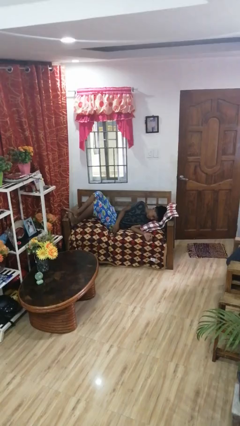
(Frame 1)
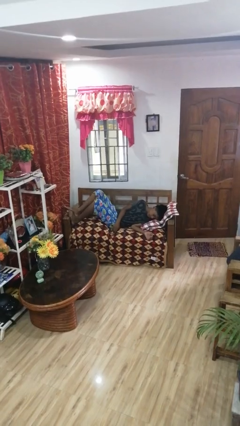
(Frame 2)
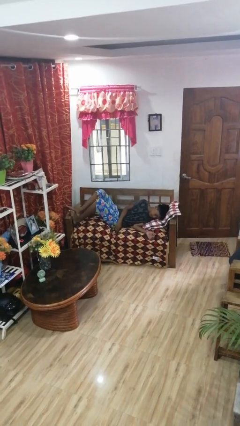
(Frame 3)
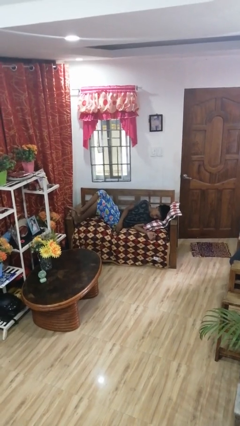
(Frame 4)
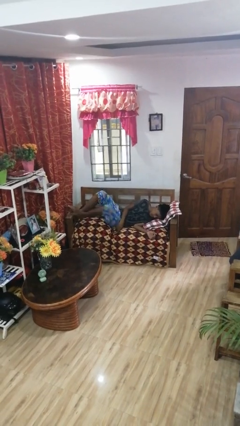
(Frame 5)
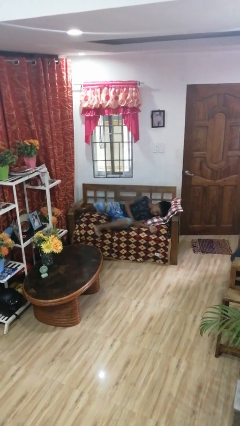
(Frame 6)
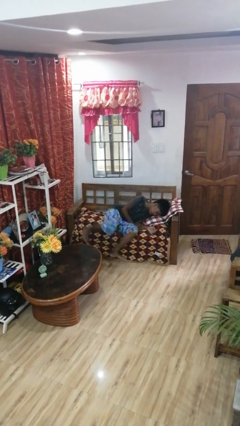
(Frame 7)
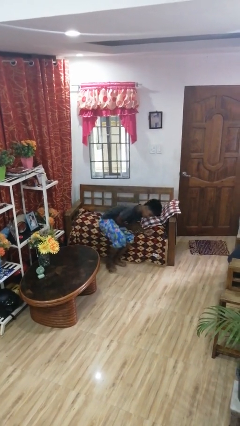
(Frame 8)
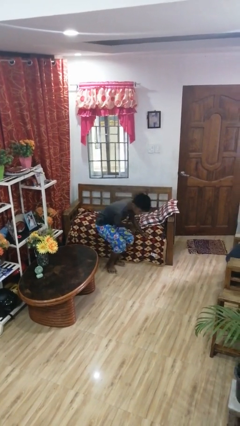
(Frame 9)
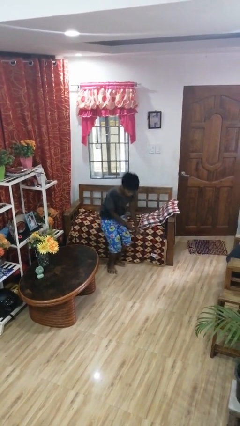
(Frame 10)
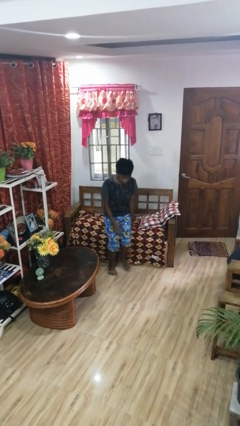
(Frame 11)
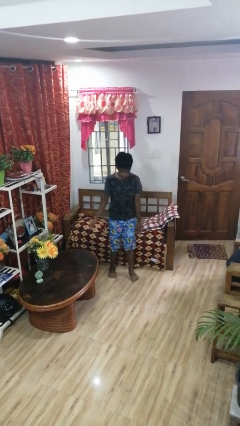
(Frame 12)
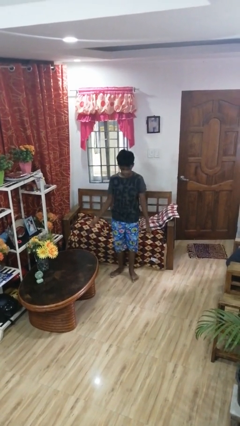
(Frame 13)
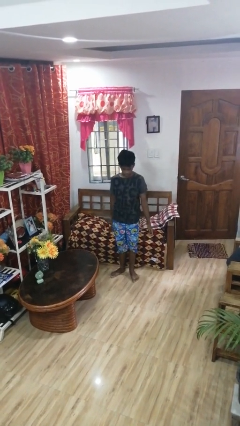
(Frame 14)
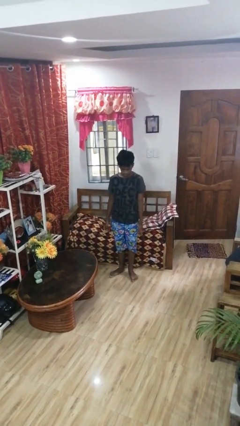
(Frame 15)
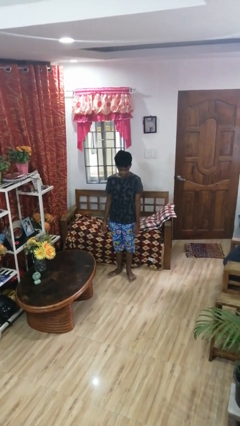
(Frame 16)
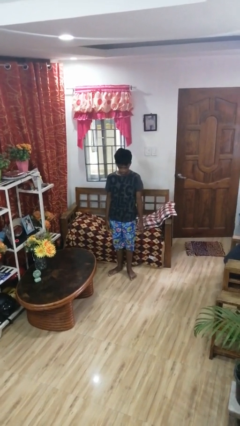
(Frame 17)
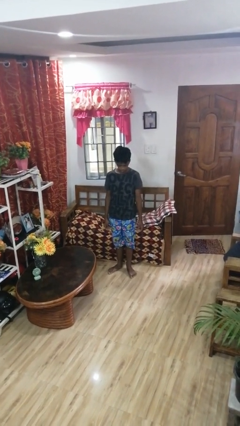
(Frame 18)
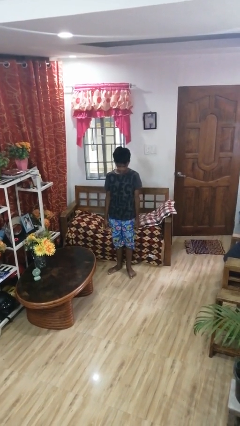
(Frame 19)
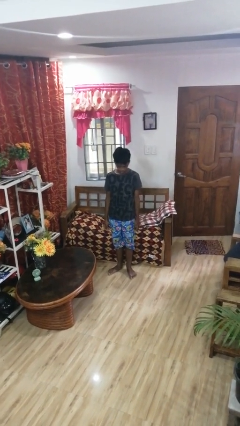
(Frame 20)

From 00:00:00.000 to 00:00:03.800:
person stands up

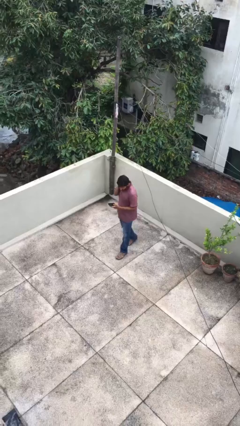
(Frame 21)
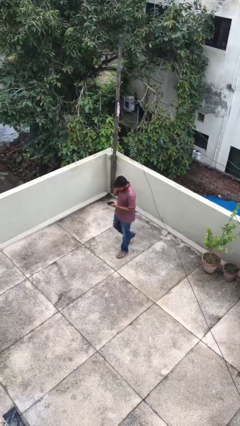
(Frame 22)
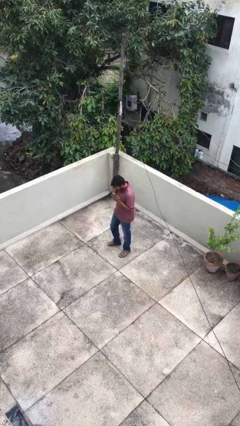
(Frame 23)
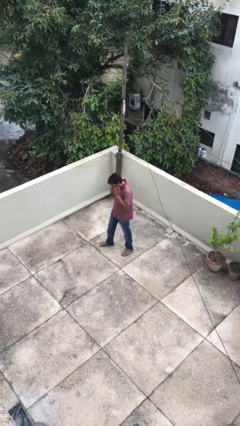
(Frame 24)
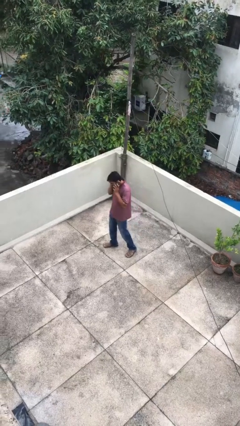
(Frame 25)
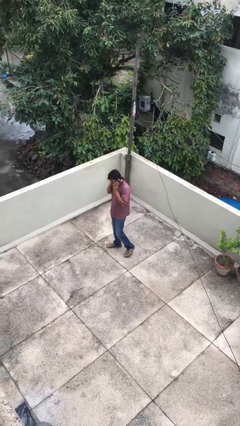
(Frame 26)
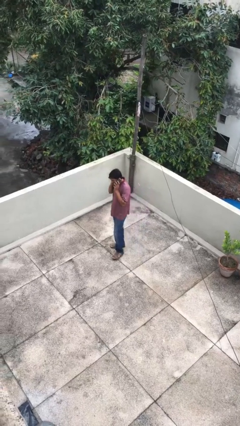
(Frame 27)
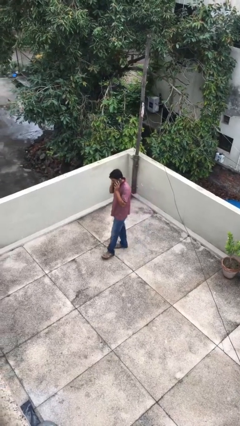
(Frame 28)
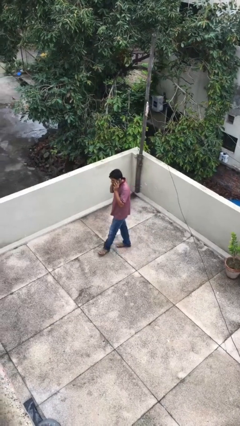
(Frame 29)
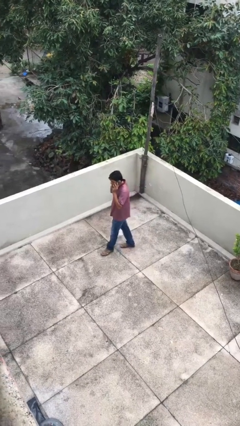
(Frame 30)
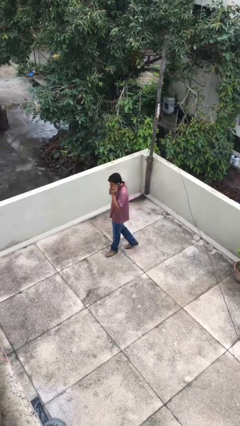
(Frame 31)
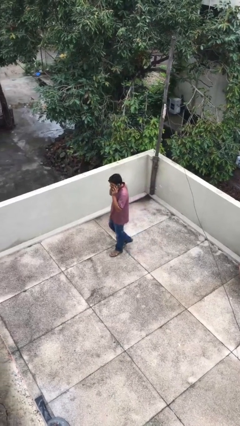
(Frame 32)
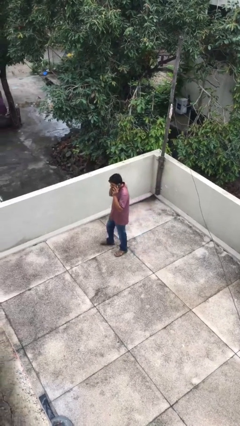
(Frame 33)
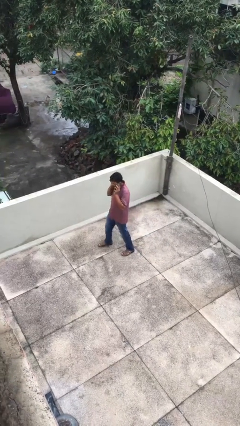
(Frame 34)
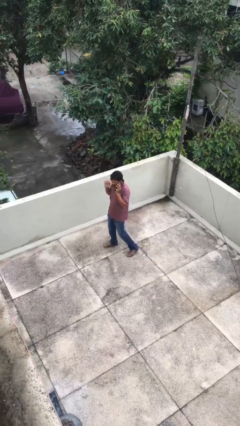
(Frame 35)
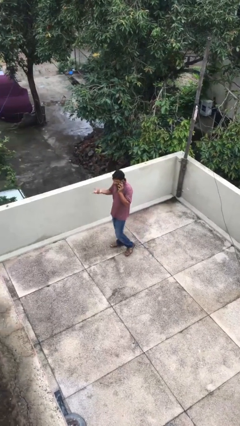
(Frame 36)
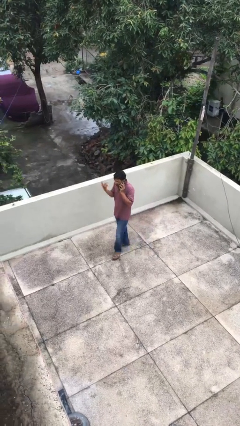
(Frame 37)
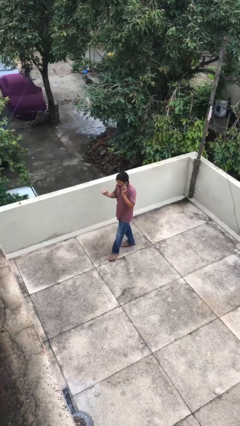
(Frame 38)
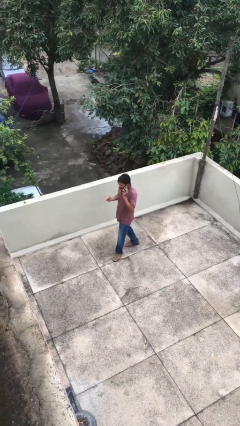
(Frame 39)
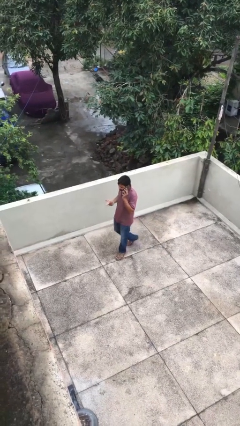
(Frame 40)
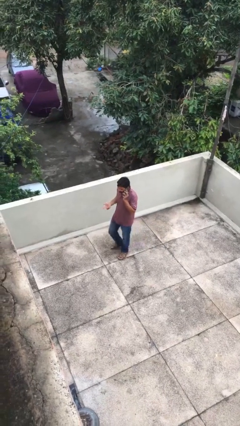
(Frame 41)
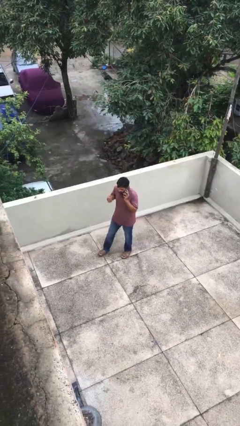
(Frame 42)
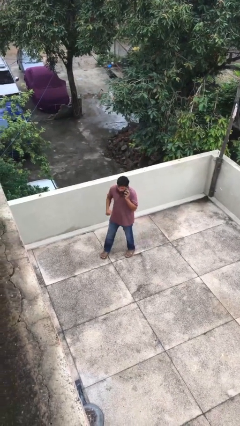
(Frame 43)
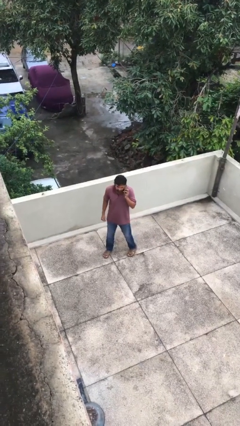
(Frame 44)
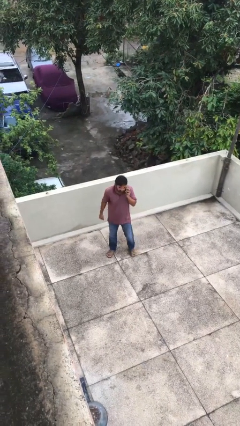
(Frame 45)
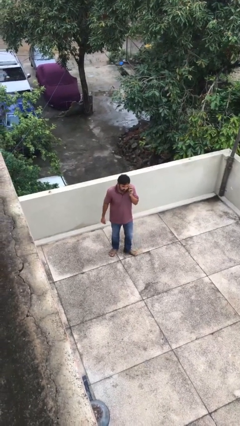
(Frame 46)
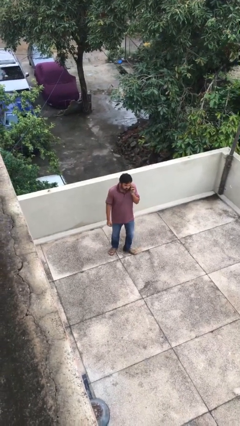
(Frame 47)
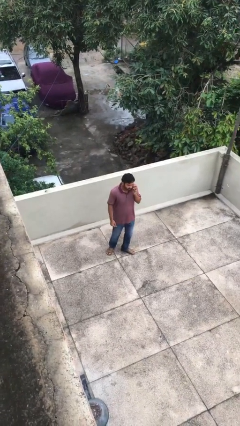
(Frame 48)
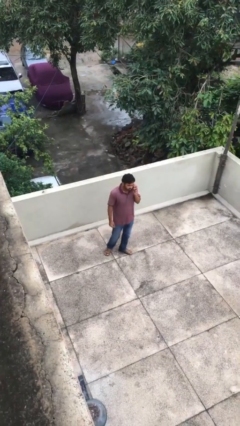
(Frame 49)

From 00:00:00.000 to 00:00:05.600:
person talks on phone

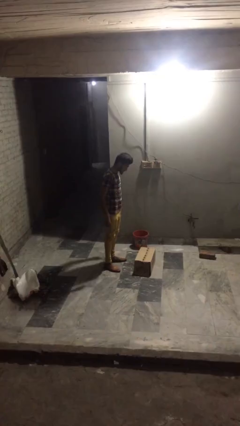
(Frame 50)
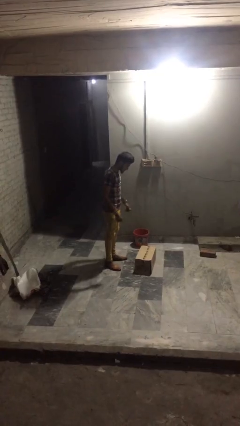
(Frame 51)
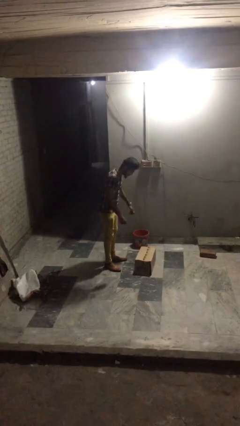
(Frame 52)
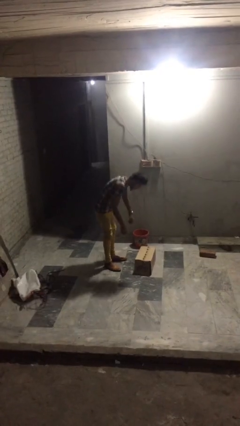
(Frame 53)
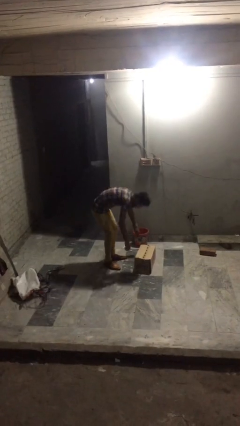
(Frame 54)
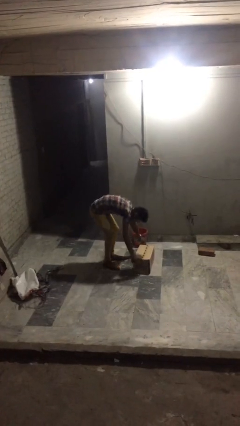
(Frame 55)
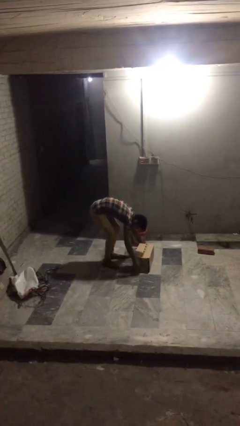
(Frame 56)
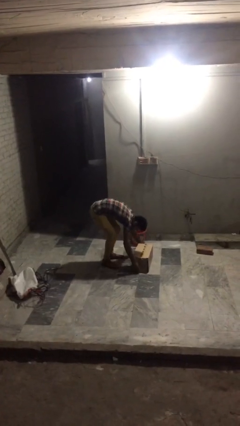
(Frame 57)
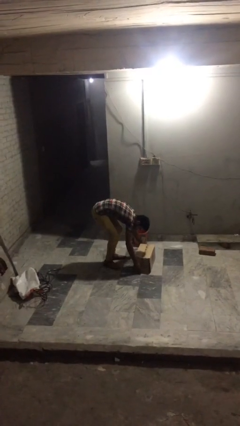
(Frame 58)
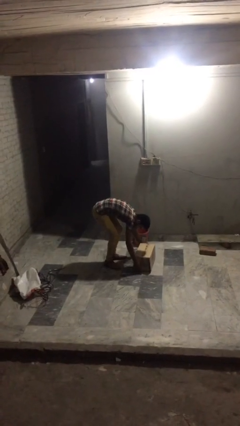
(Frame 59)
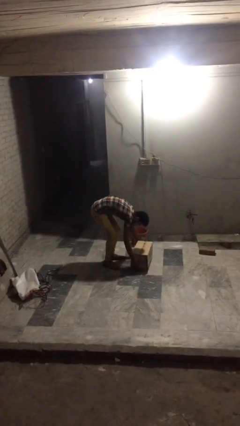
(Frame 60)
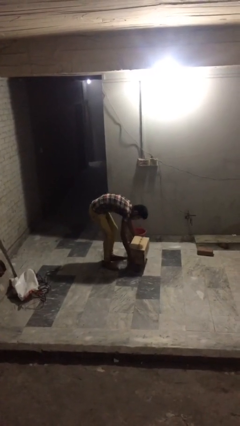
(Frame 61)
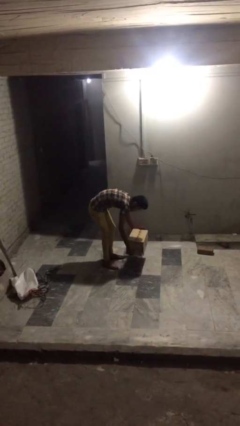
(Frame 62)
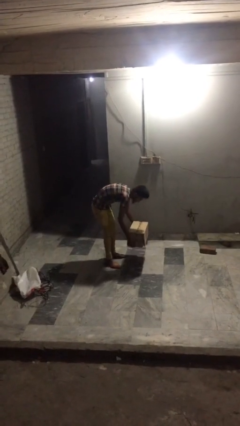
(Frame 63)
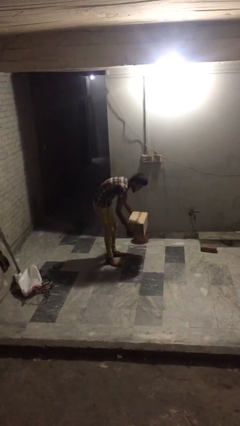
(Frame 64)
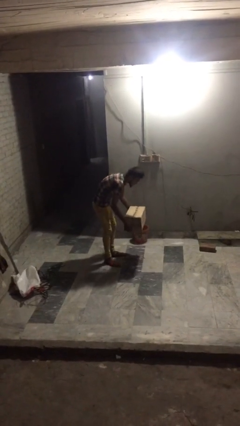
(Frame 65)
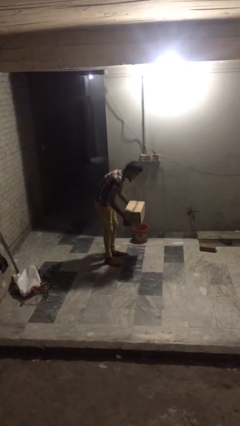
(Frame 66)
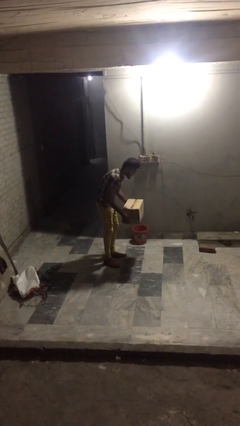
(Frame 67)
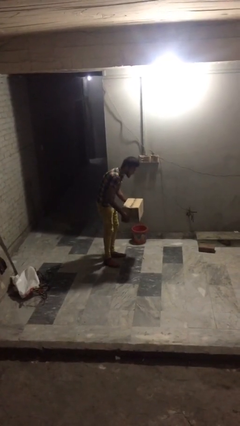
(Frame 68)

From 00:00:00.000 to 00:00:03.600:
person picks up object from floor

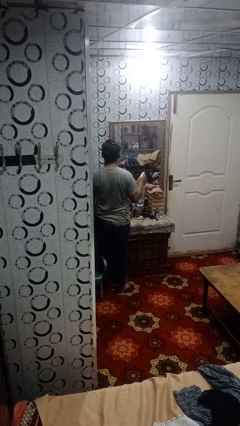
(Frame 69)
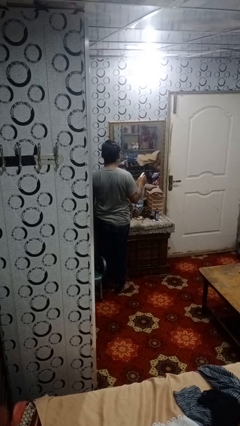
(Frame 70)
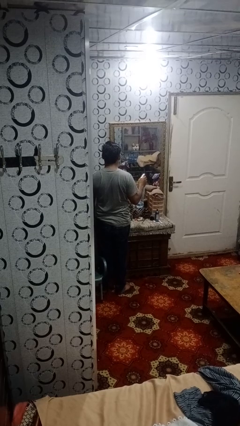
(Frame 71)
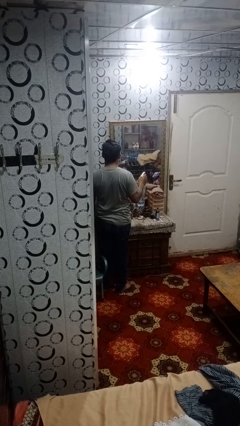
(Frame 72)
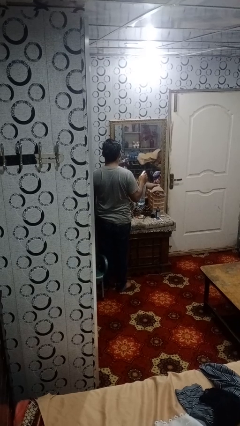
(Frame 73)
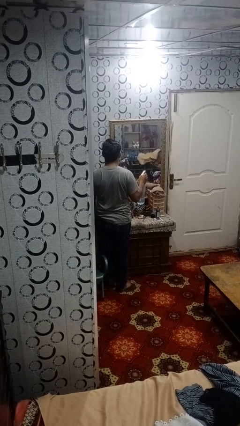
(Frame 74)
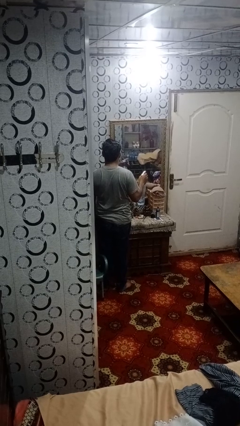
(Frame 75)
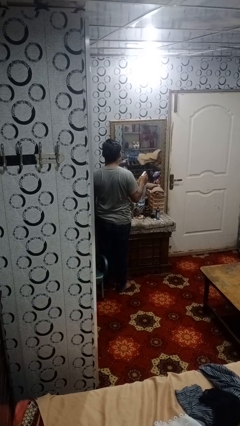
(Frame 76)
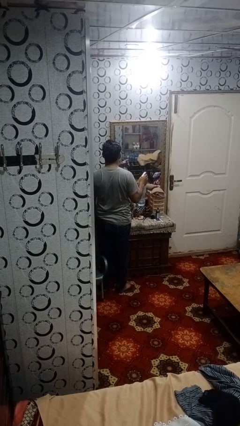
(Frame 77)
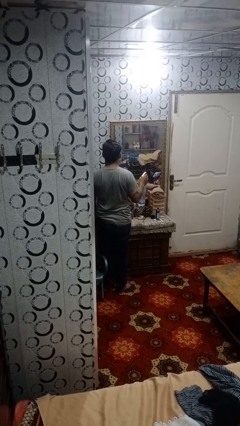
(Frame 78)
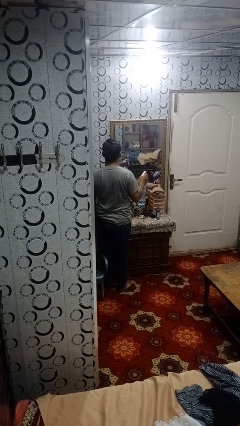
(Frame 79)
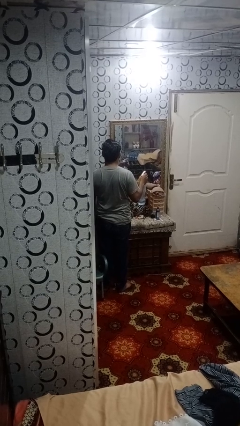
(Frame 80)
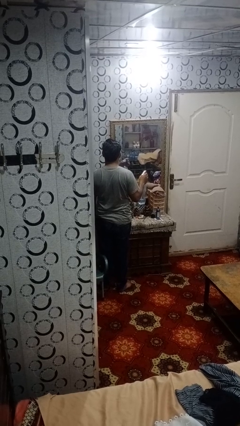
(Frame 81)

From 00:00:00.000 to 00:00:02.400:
person sprays from bottle

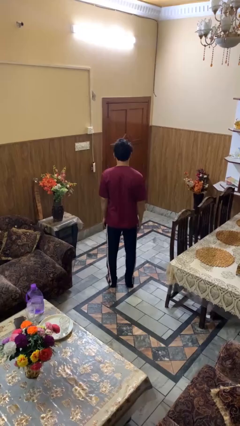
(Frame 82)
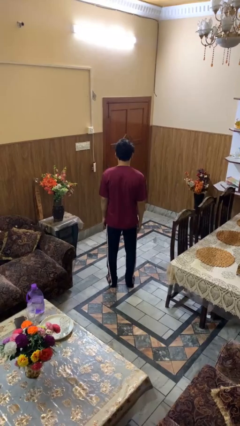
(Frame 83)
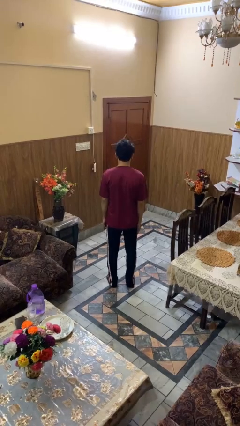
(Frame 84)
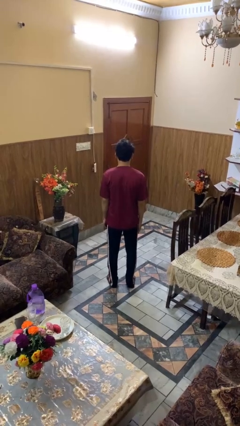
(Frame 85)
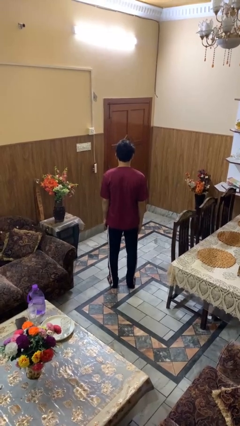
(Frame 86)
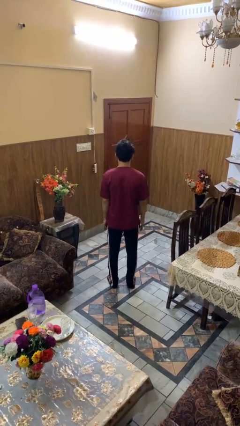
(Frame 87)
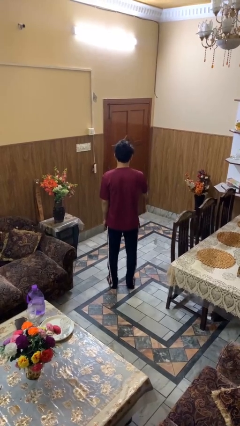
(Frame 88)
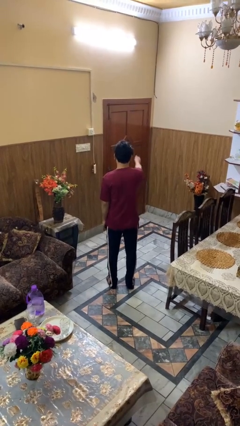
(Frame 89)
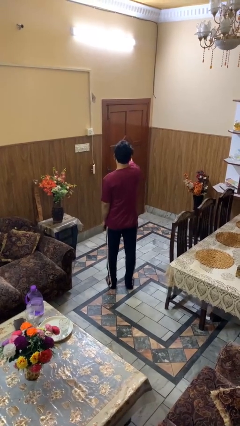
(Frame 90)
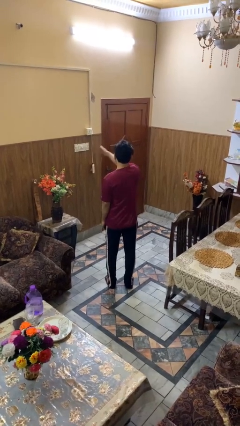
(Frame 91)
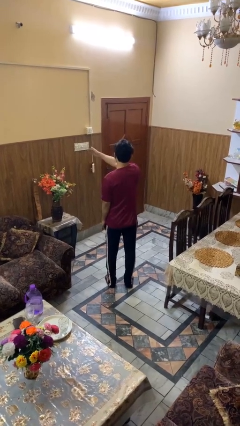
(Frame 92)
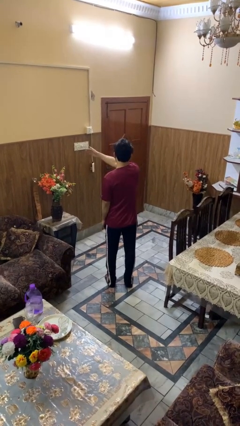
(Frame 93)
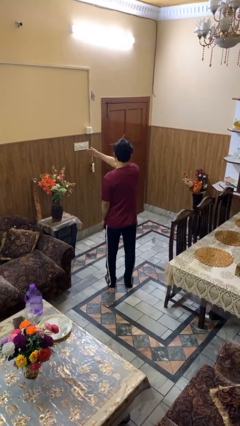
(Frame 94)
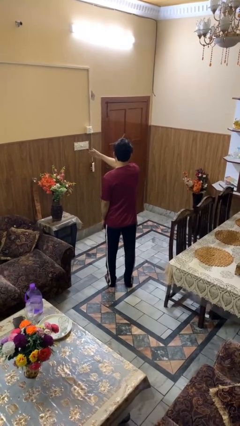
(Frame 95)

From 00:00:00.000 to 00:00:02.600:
person gestures swipe left
